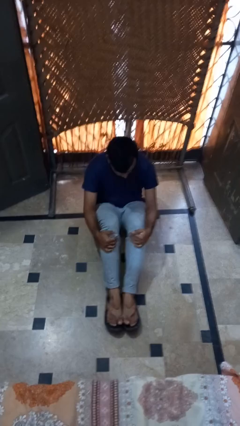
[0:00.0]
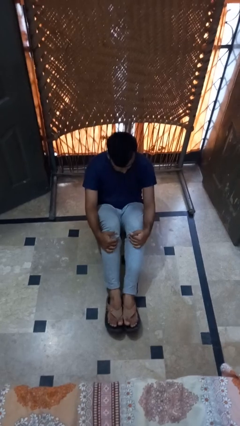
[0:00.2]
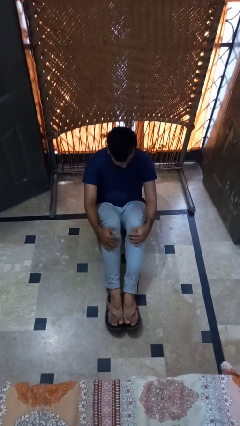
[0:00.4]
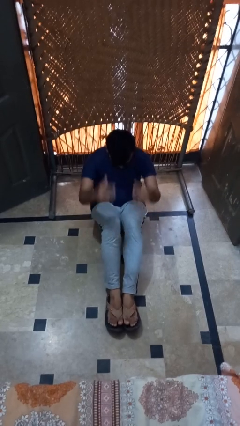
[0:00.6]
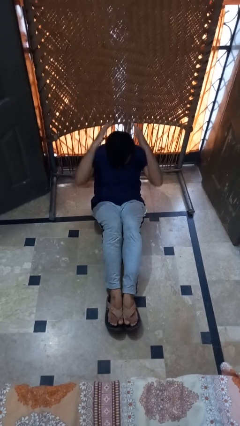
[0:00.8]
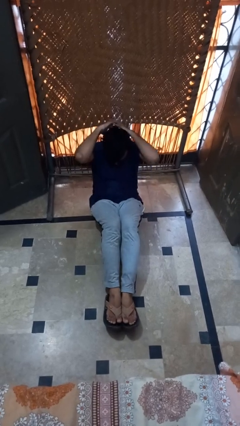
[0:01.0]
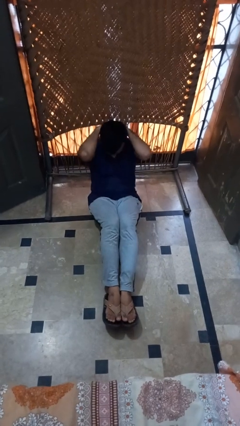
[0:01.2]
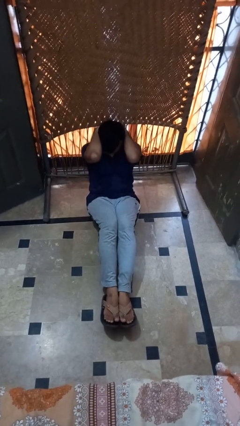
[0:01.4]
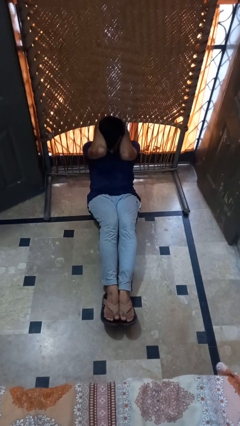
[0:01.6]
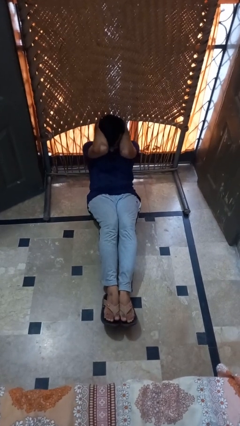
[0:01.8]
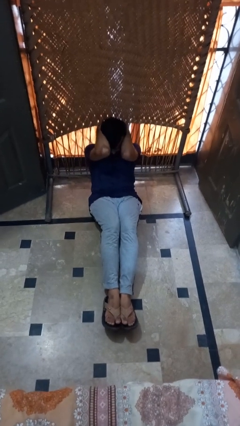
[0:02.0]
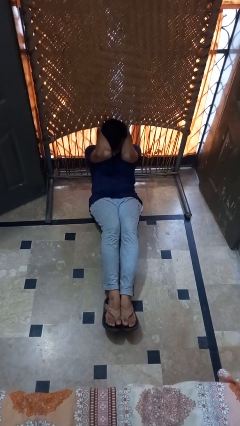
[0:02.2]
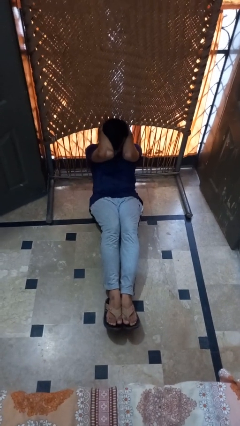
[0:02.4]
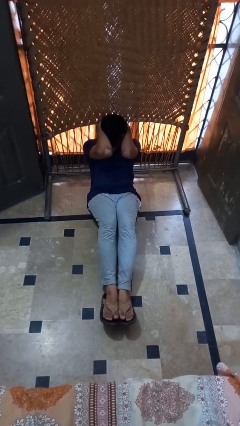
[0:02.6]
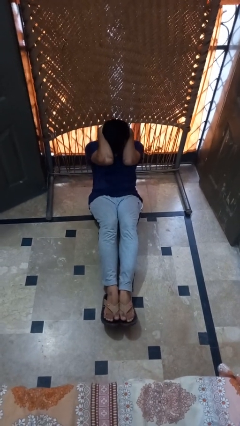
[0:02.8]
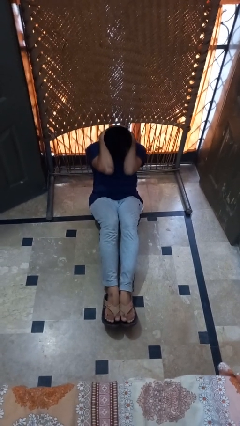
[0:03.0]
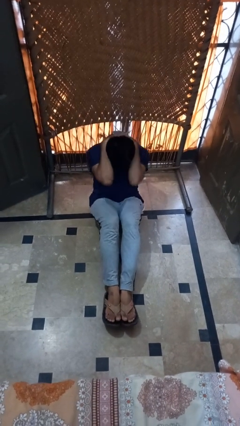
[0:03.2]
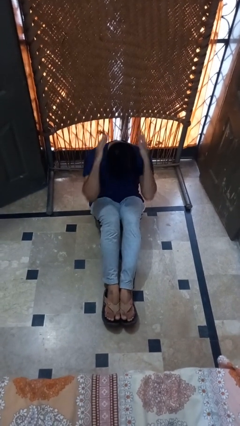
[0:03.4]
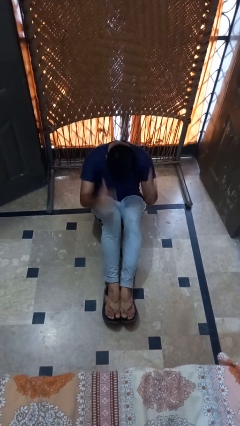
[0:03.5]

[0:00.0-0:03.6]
person exercises with situp

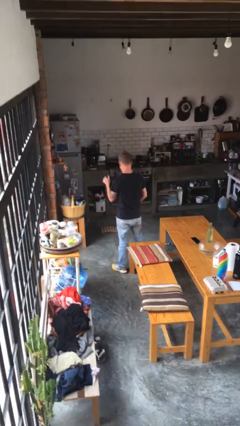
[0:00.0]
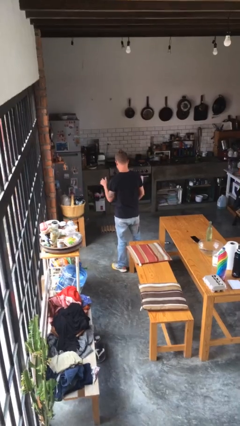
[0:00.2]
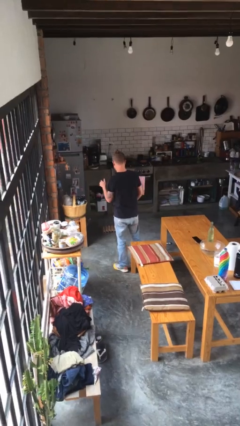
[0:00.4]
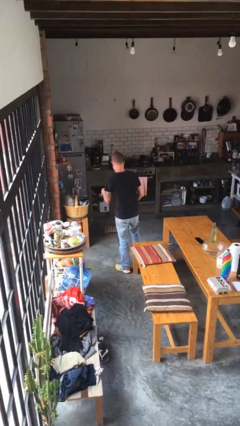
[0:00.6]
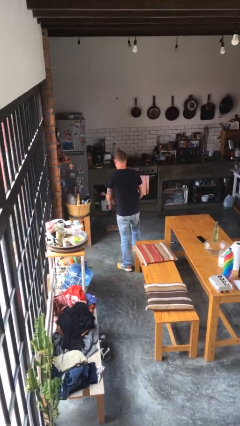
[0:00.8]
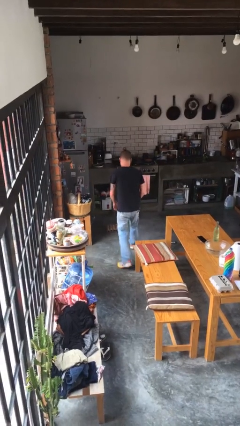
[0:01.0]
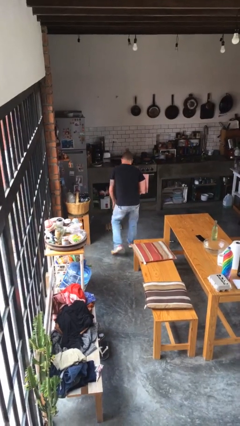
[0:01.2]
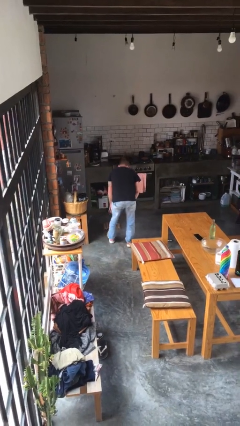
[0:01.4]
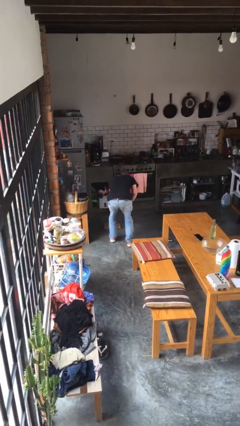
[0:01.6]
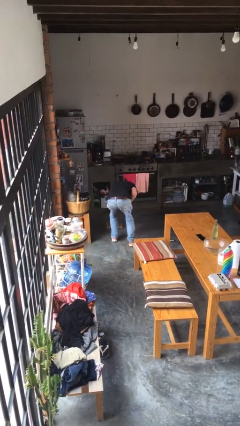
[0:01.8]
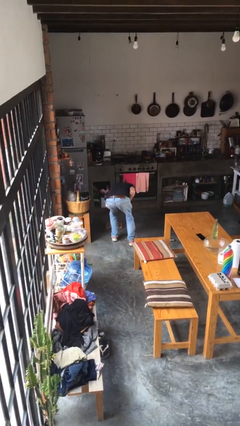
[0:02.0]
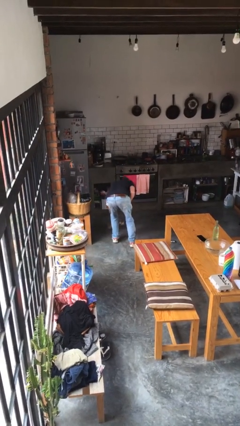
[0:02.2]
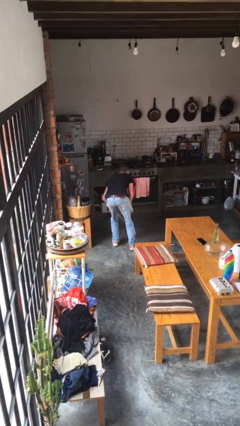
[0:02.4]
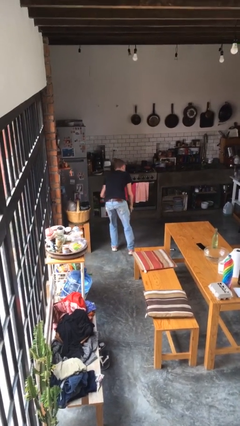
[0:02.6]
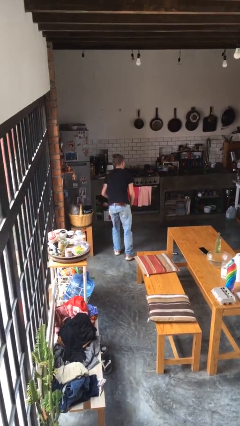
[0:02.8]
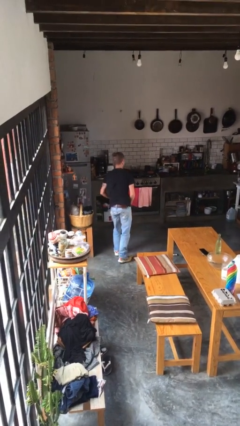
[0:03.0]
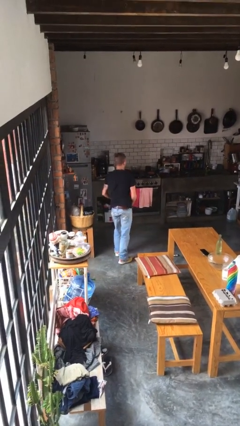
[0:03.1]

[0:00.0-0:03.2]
person picks up object from floor

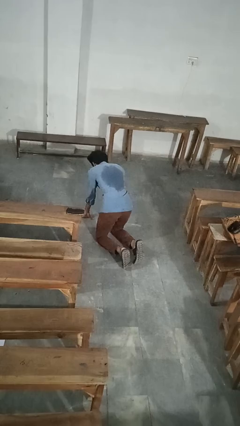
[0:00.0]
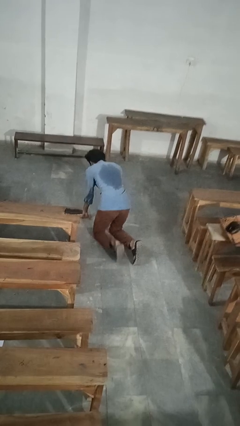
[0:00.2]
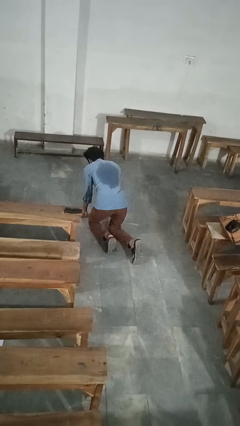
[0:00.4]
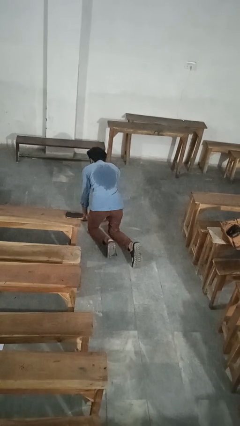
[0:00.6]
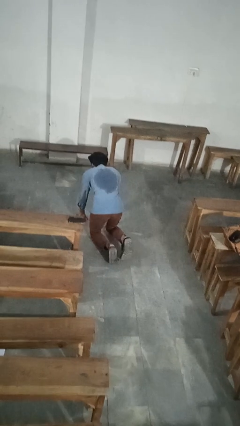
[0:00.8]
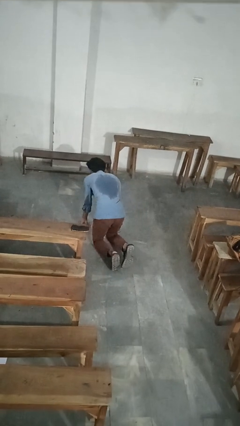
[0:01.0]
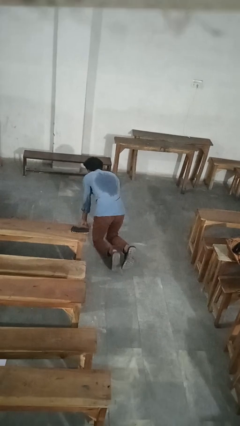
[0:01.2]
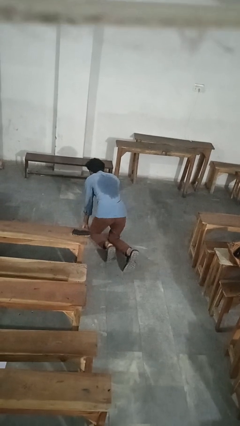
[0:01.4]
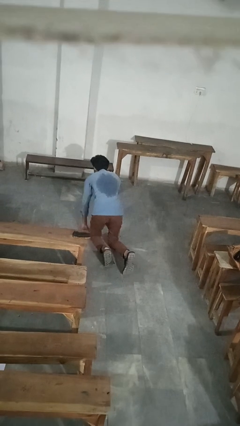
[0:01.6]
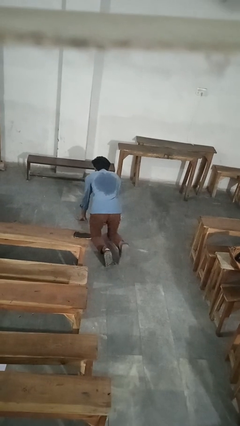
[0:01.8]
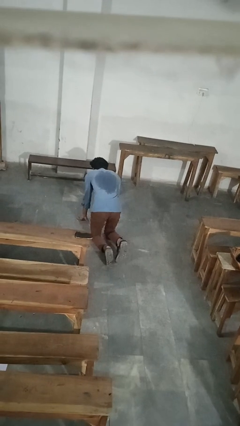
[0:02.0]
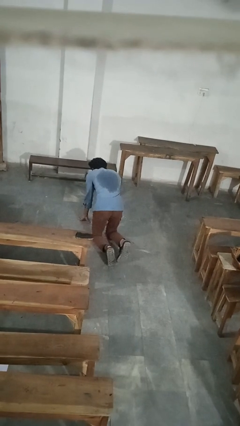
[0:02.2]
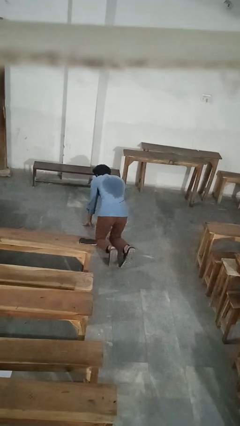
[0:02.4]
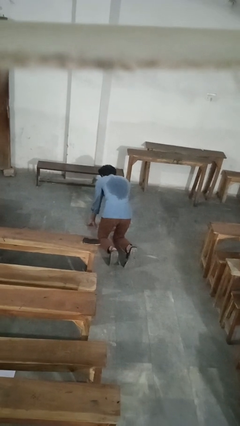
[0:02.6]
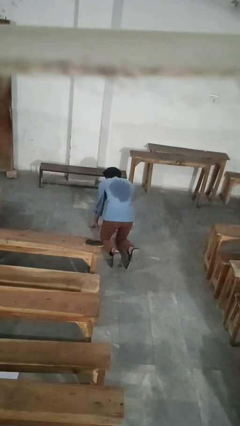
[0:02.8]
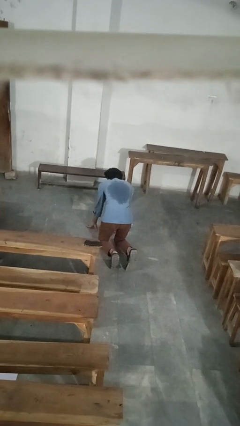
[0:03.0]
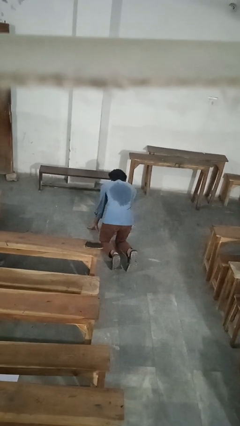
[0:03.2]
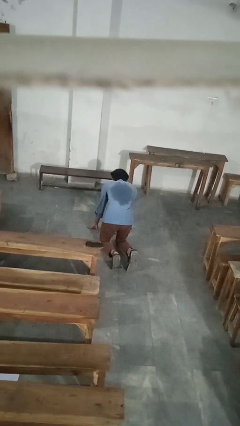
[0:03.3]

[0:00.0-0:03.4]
person crawls

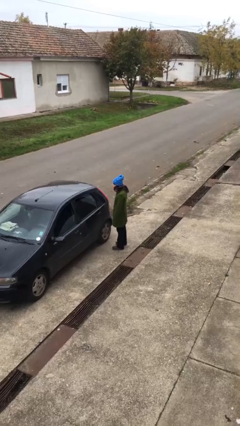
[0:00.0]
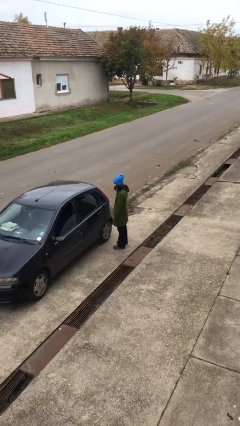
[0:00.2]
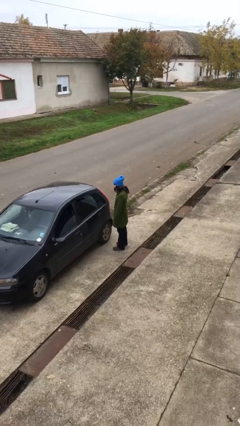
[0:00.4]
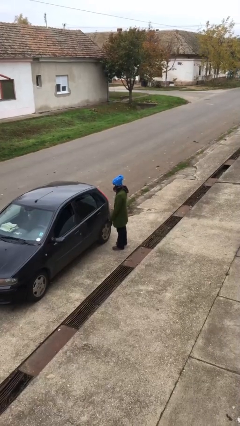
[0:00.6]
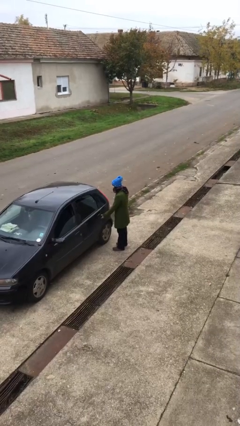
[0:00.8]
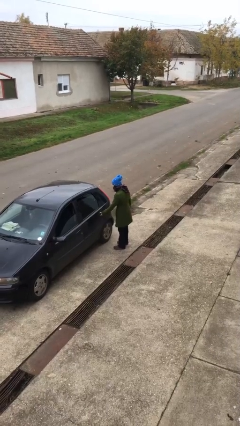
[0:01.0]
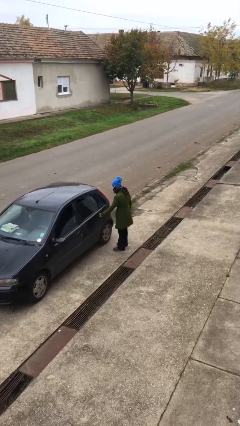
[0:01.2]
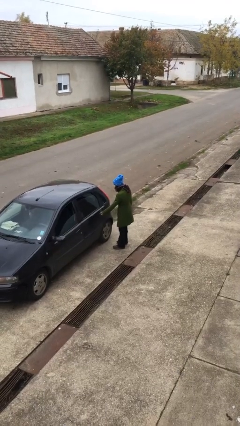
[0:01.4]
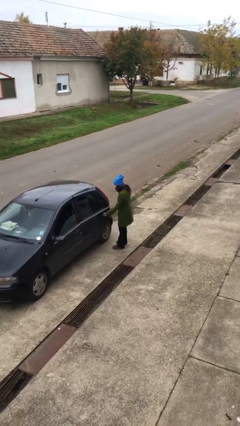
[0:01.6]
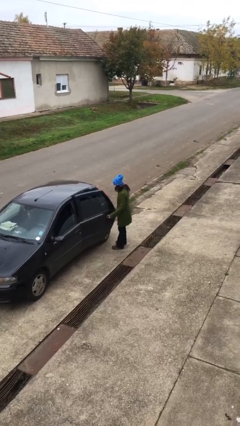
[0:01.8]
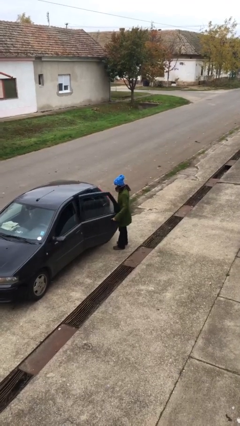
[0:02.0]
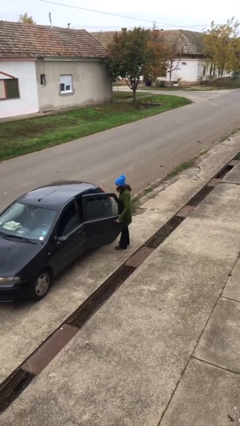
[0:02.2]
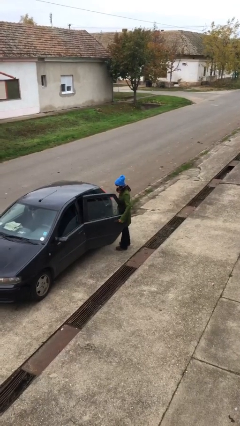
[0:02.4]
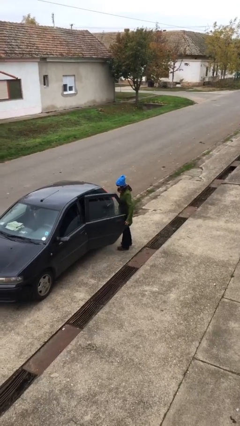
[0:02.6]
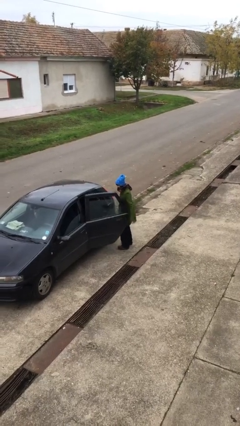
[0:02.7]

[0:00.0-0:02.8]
person opens car door

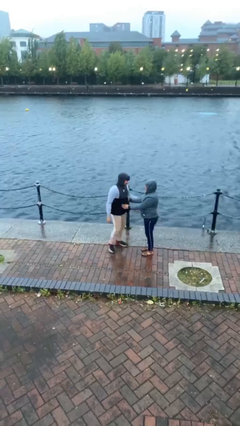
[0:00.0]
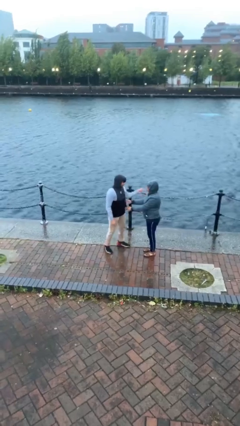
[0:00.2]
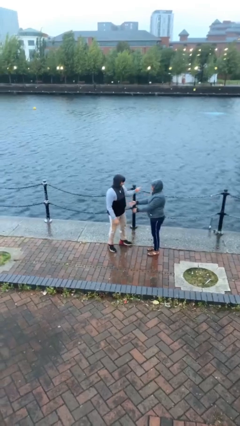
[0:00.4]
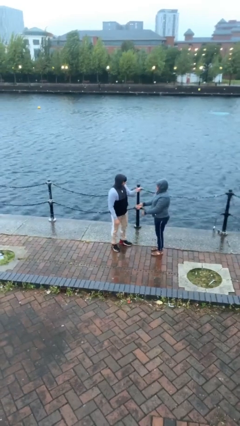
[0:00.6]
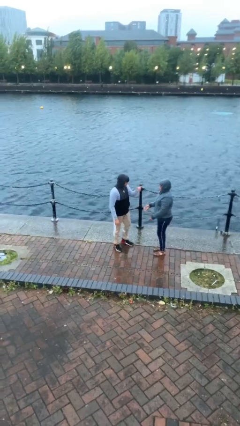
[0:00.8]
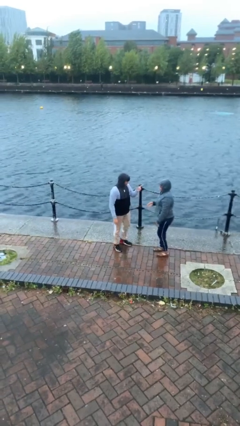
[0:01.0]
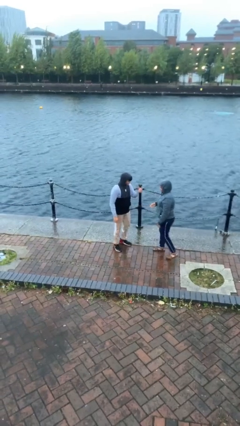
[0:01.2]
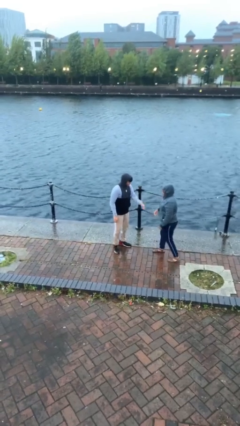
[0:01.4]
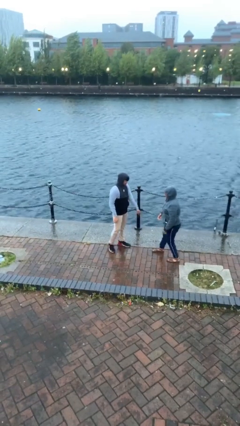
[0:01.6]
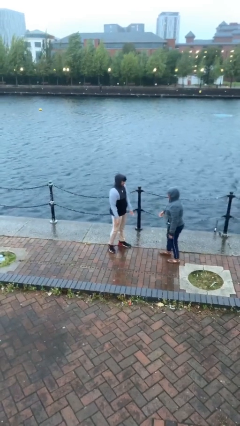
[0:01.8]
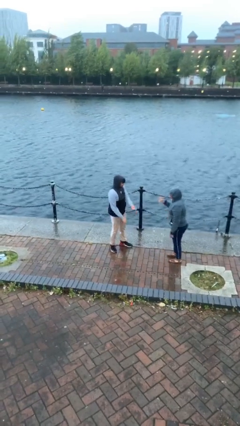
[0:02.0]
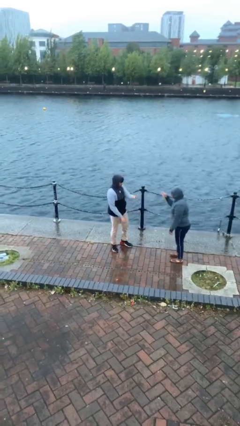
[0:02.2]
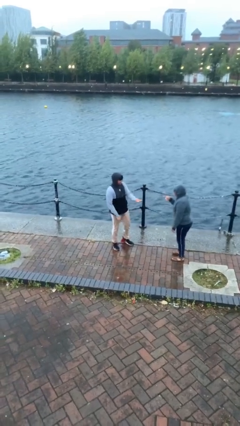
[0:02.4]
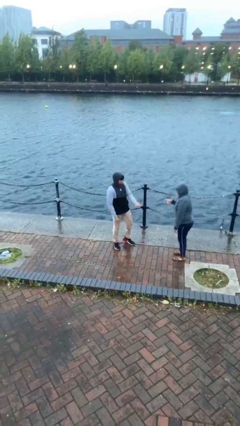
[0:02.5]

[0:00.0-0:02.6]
person talks to person

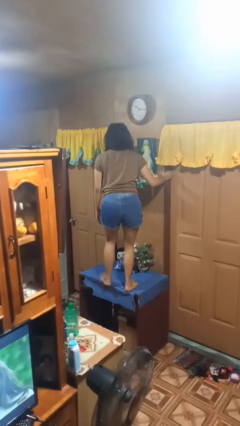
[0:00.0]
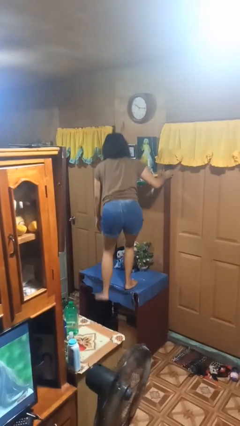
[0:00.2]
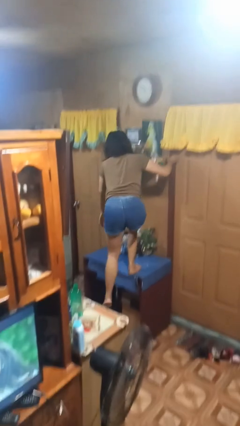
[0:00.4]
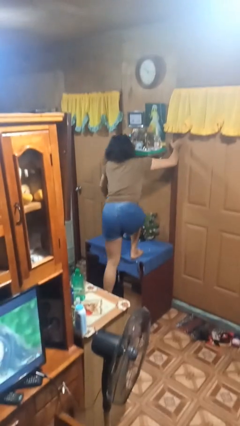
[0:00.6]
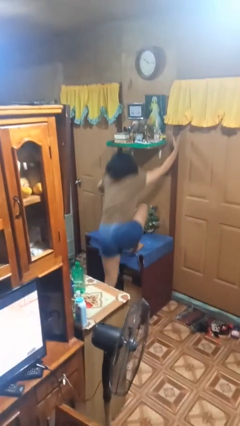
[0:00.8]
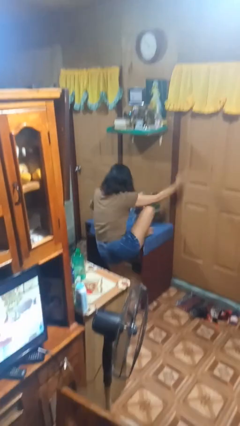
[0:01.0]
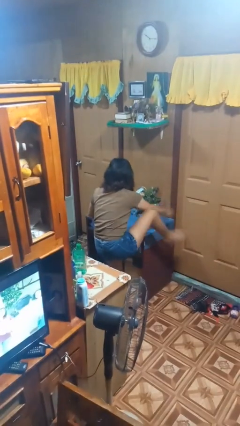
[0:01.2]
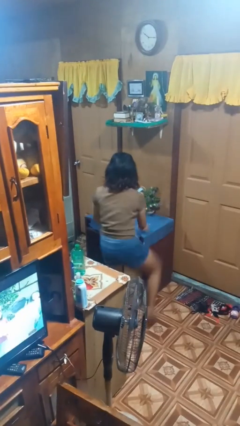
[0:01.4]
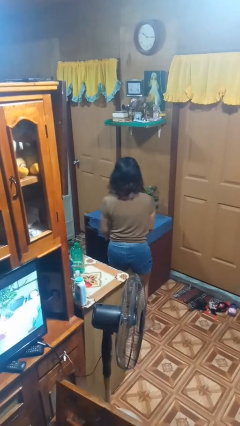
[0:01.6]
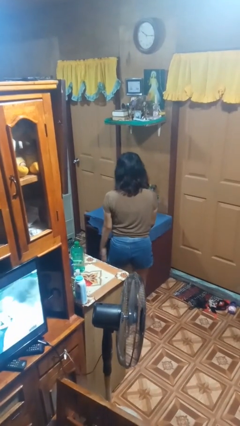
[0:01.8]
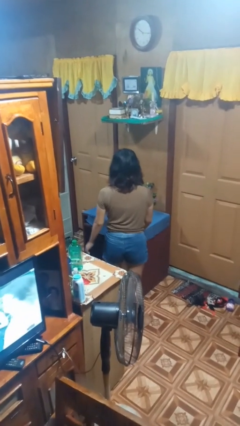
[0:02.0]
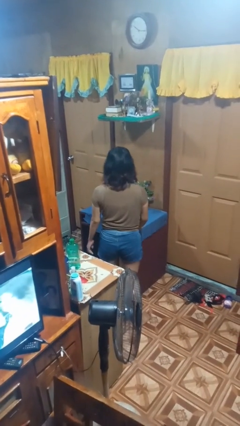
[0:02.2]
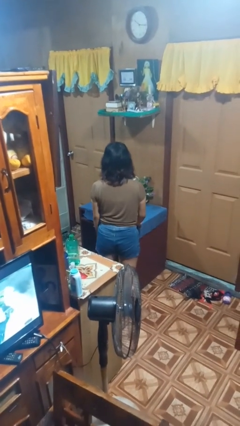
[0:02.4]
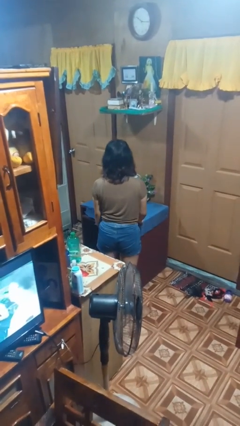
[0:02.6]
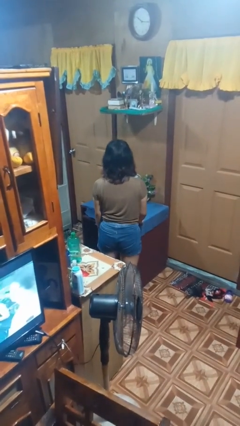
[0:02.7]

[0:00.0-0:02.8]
person climbs off table
